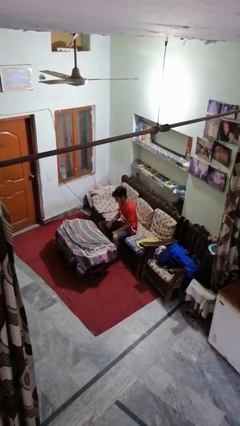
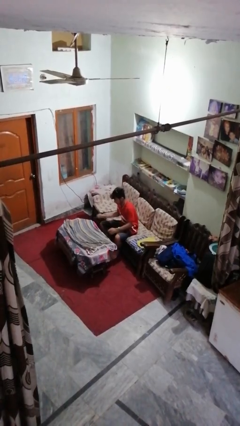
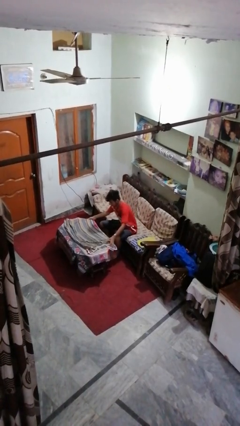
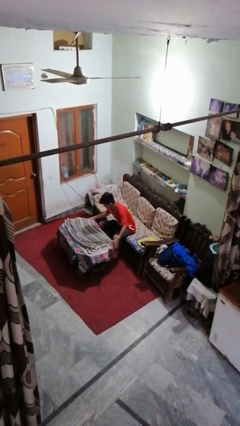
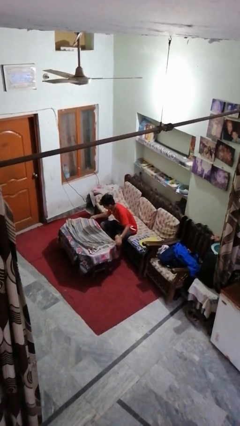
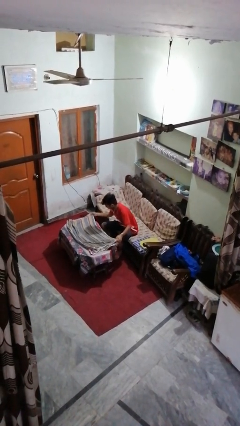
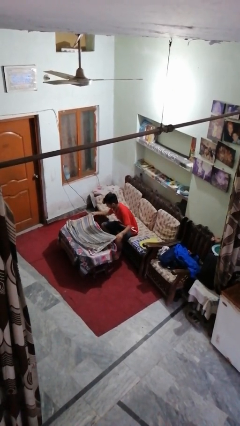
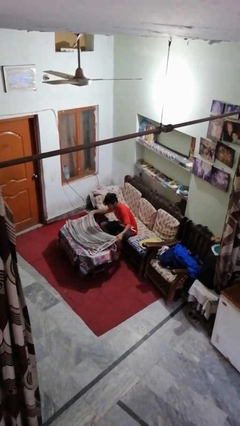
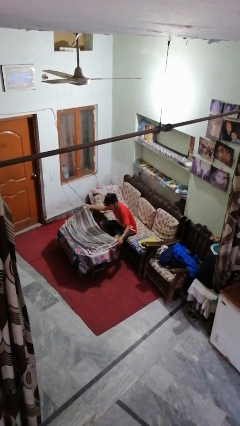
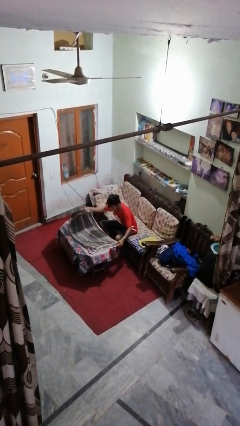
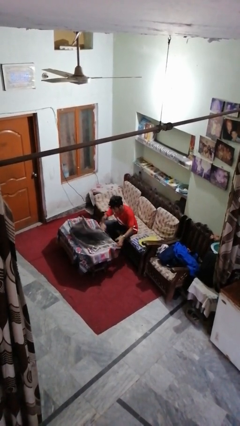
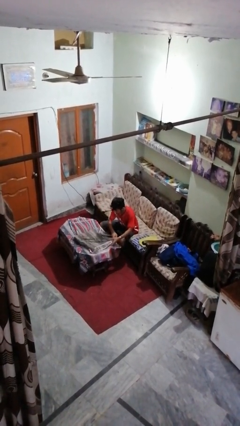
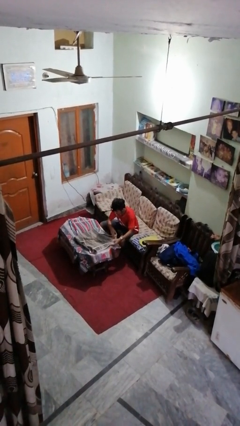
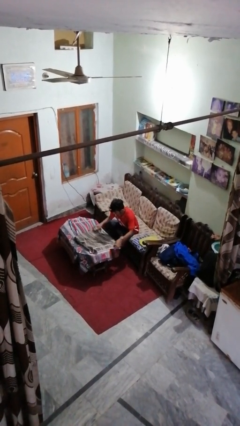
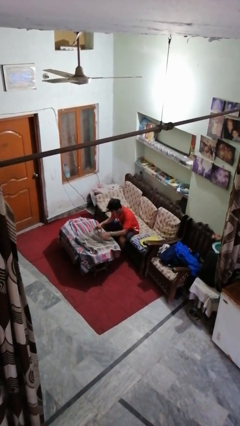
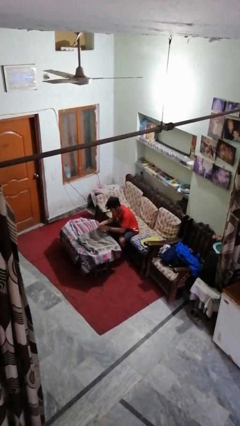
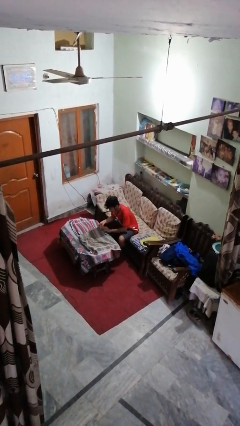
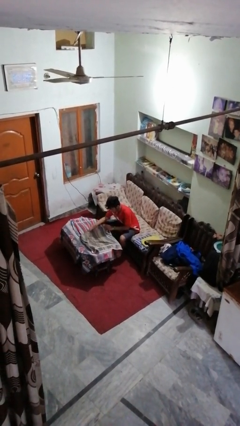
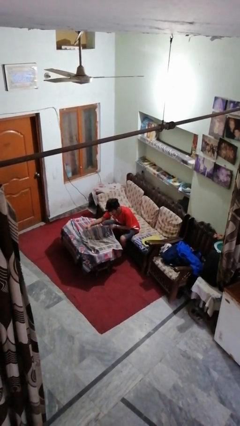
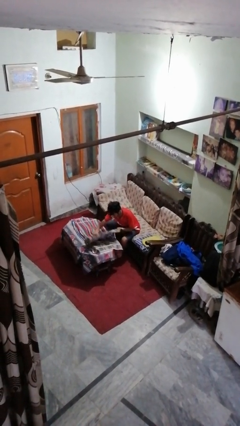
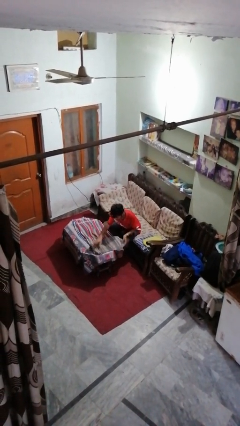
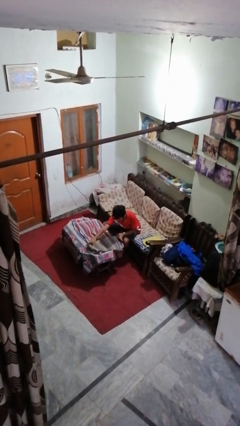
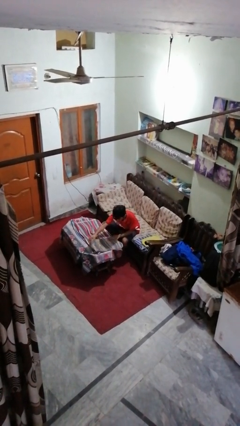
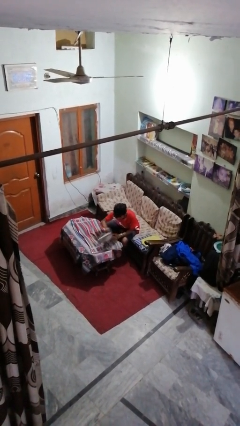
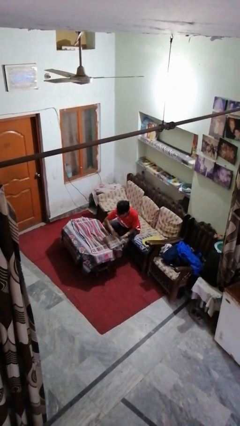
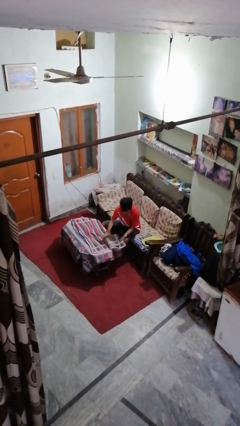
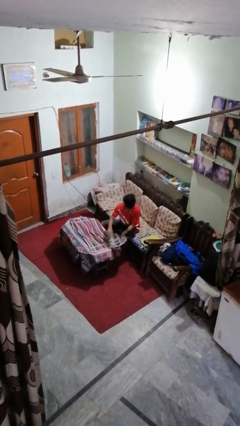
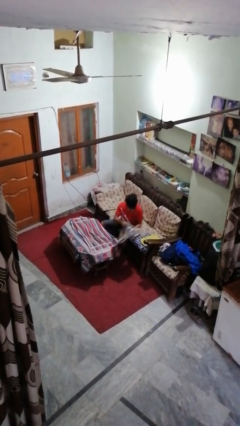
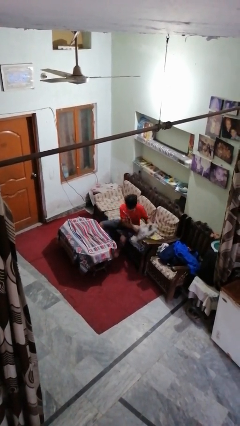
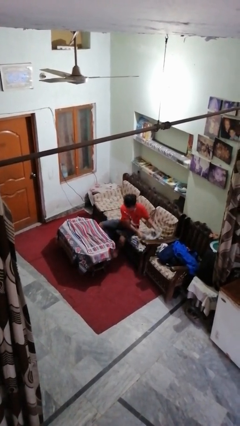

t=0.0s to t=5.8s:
person folds towel

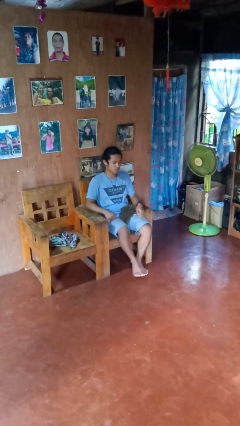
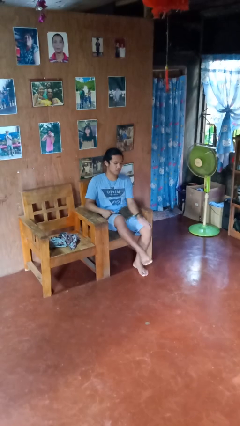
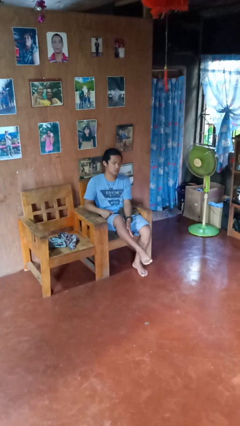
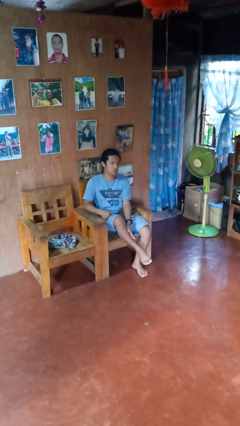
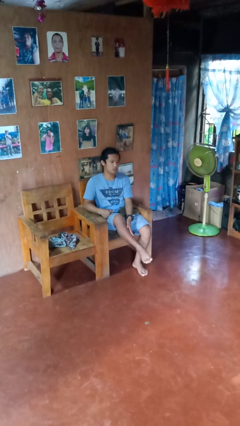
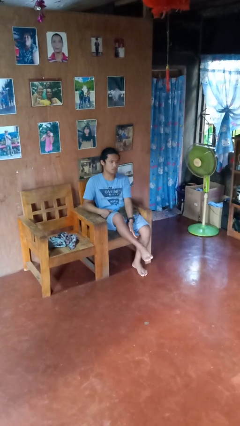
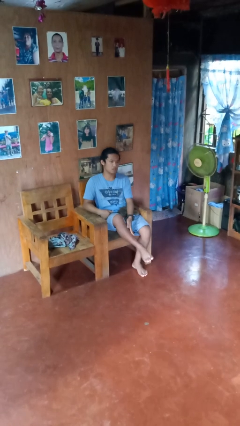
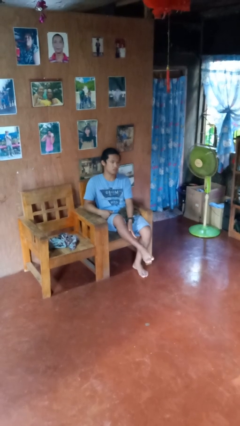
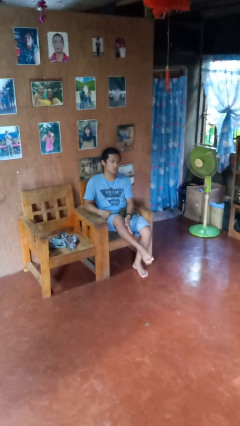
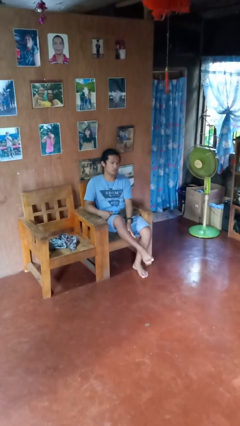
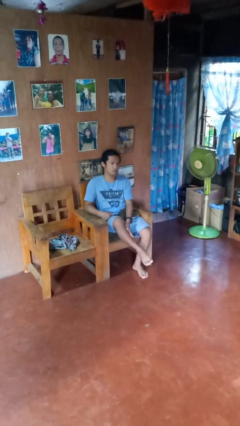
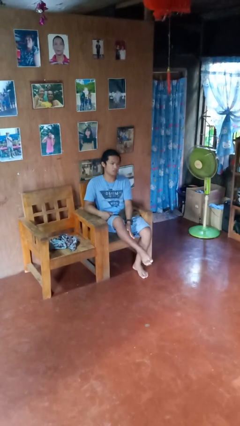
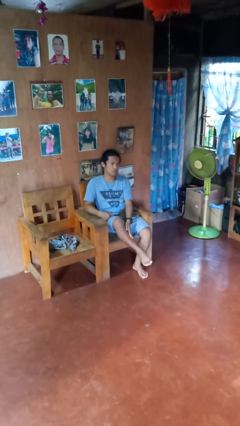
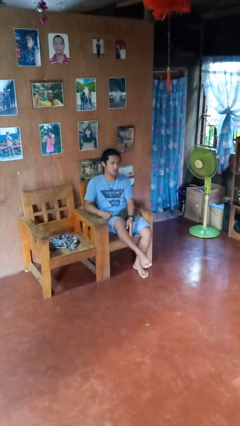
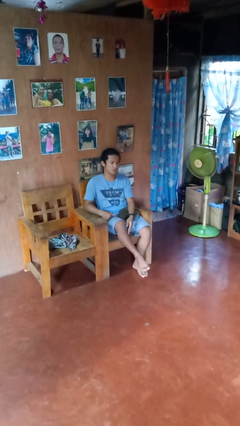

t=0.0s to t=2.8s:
person swats bug

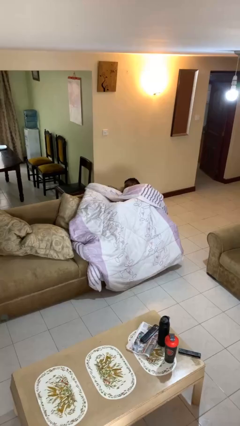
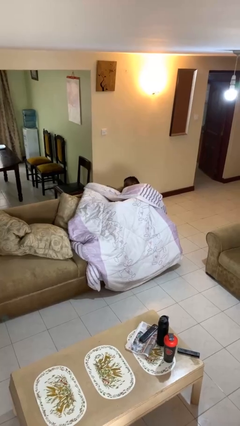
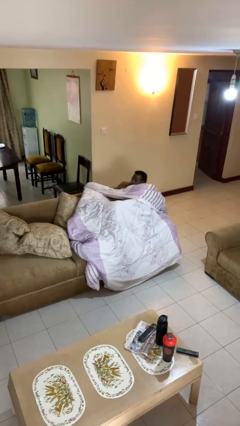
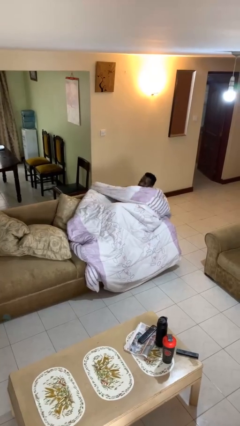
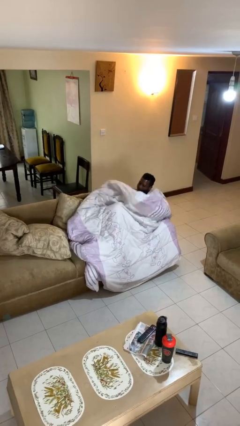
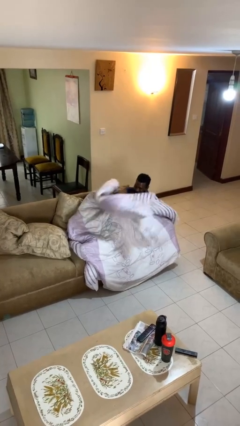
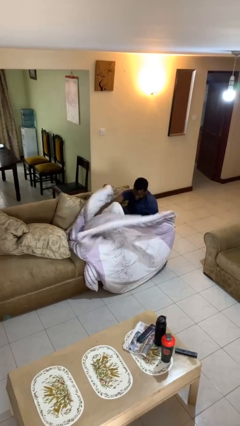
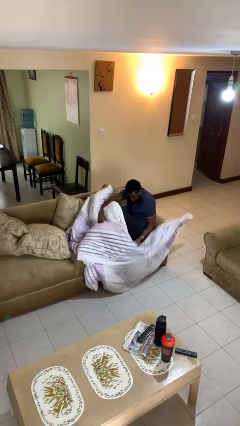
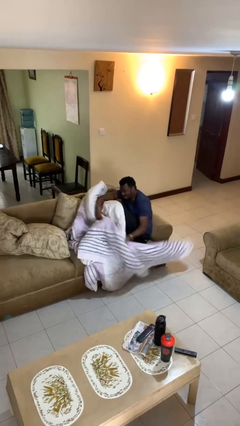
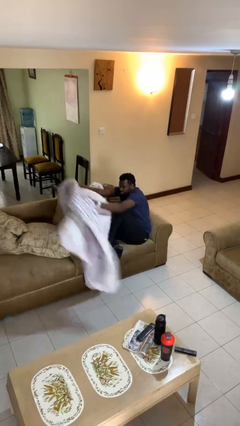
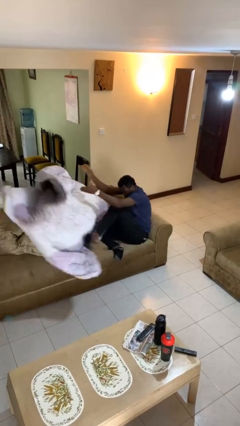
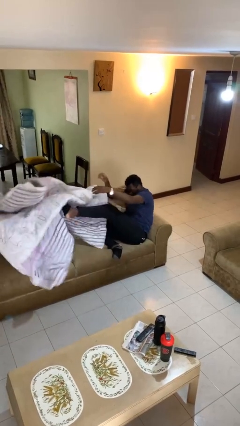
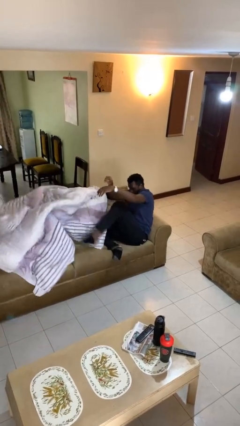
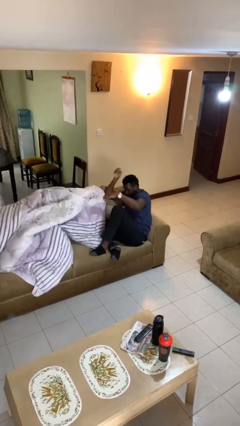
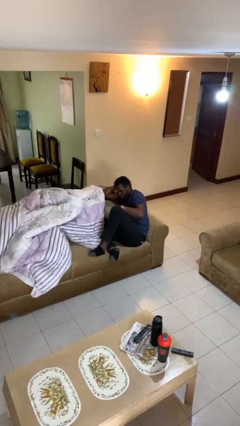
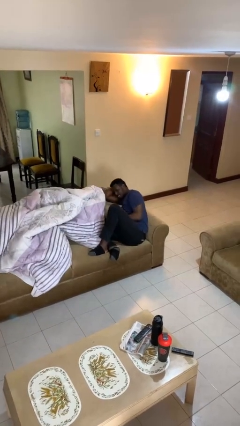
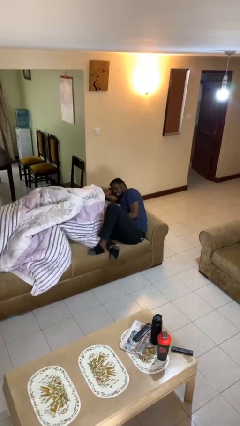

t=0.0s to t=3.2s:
person uncovers with blanket

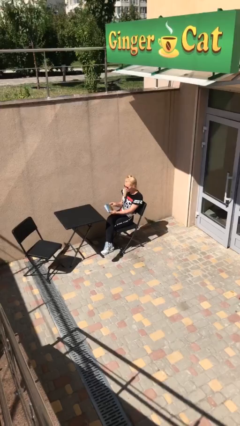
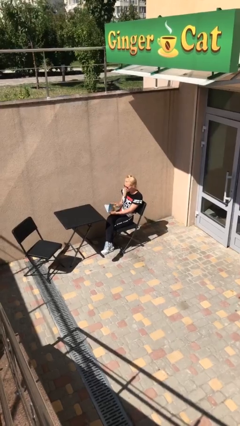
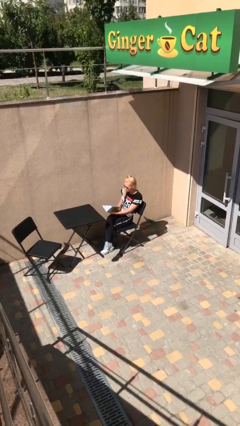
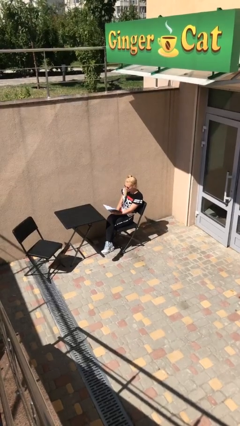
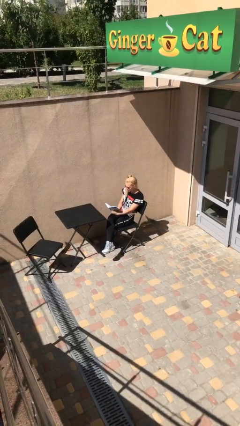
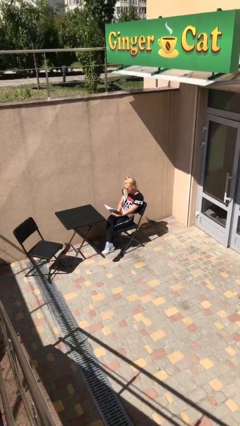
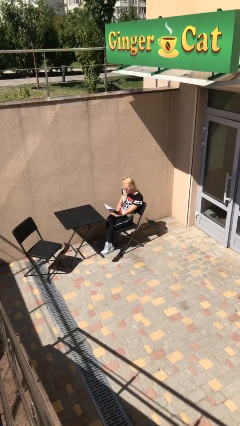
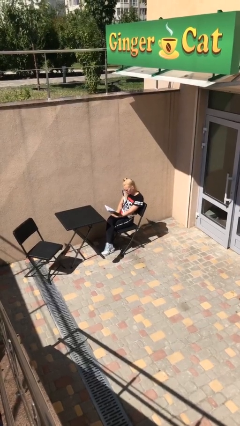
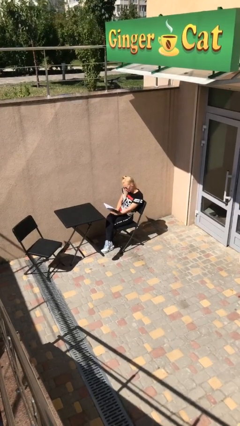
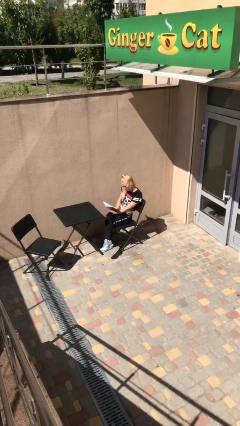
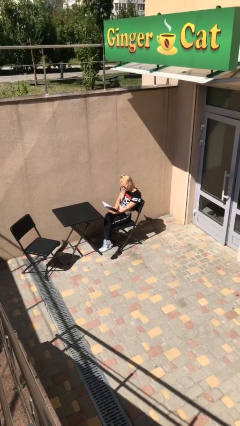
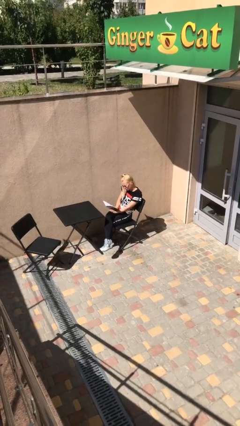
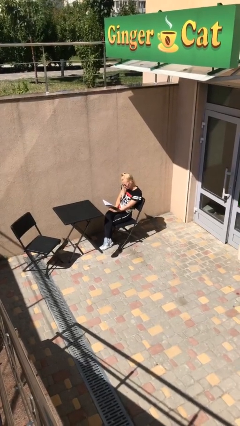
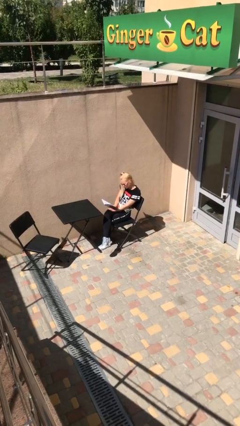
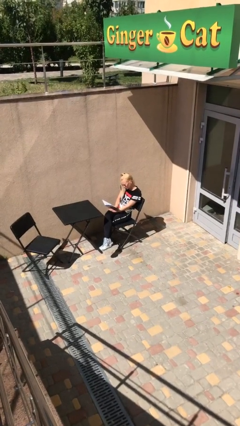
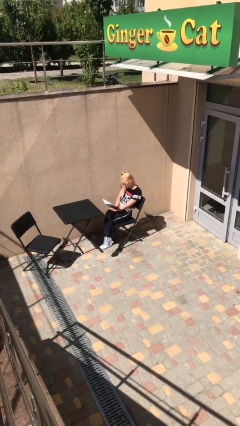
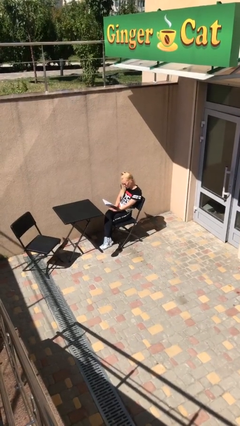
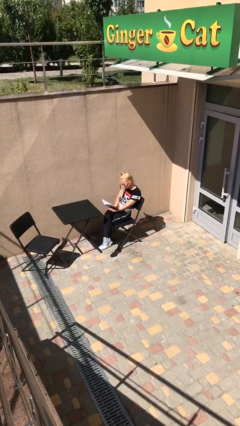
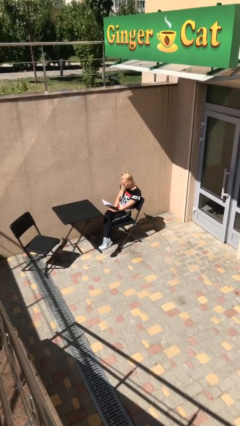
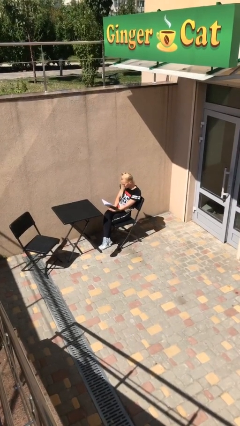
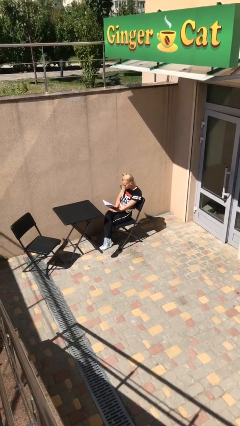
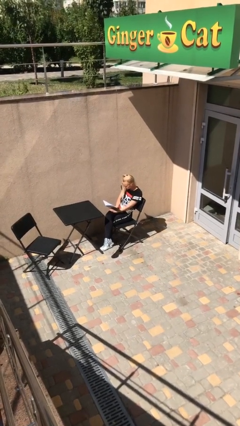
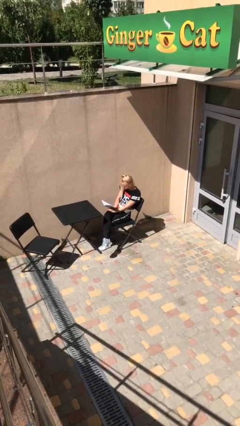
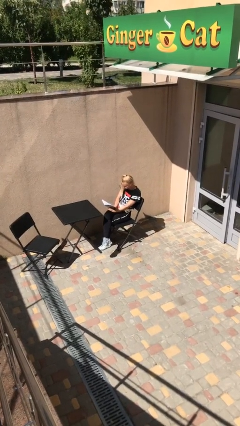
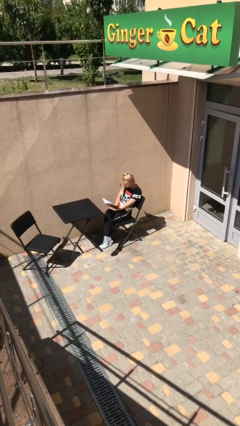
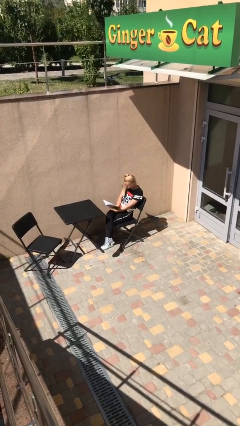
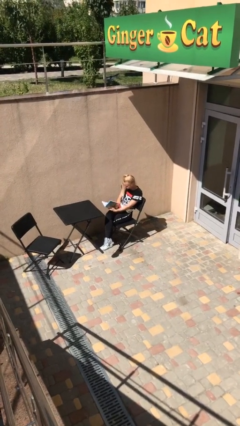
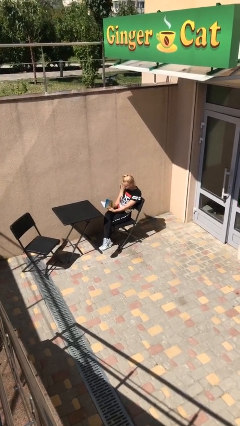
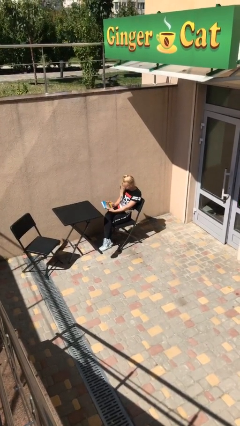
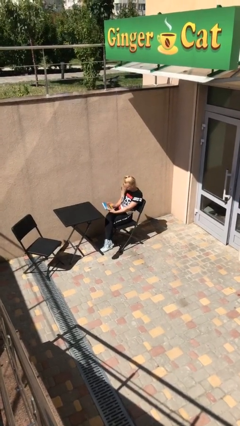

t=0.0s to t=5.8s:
person reads document
